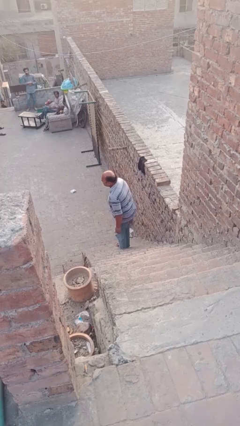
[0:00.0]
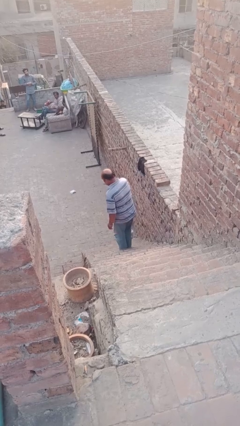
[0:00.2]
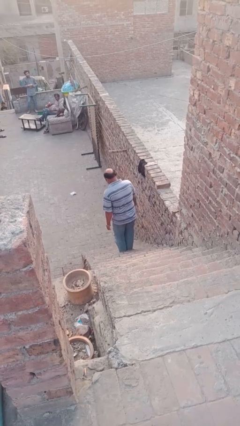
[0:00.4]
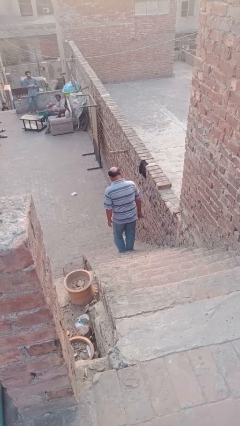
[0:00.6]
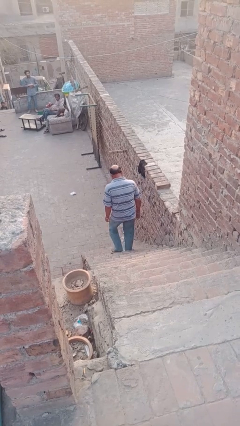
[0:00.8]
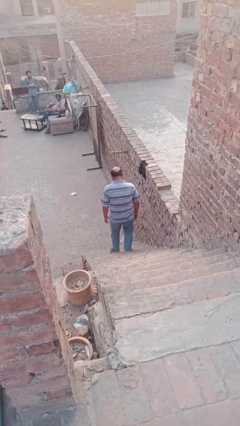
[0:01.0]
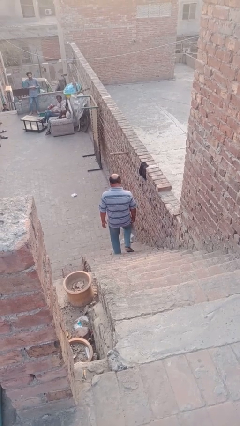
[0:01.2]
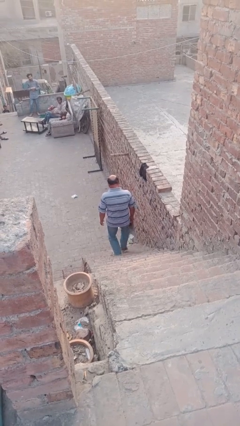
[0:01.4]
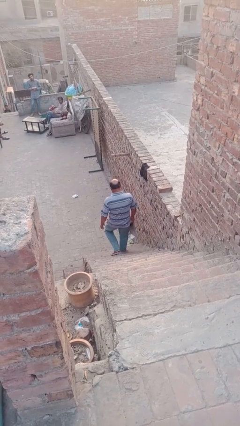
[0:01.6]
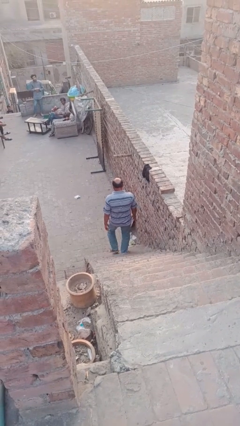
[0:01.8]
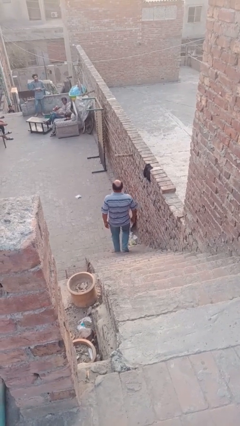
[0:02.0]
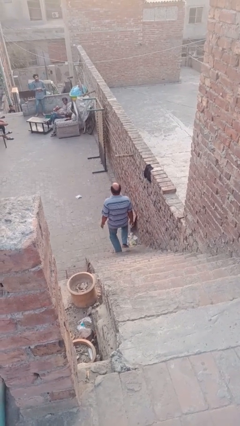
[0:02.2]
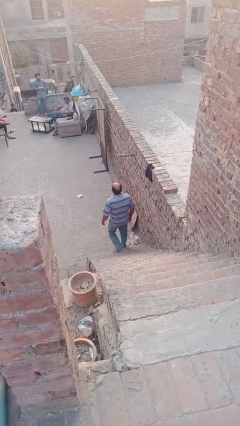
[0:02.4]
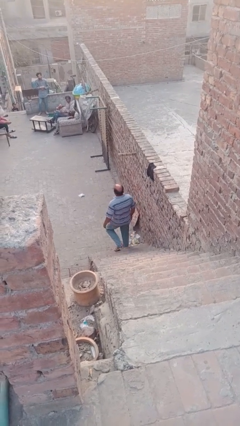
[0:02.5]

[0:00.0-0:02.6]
person climbs down stairs

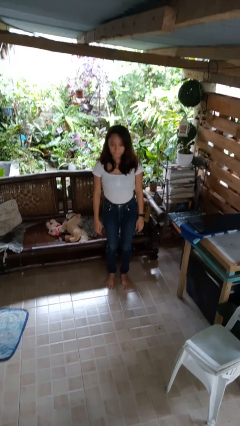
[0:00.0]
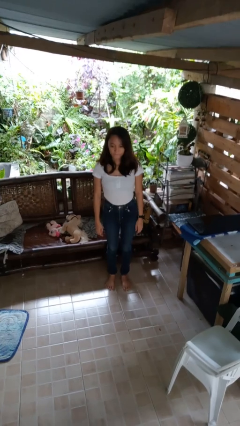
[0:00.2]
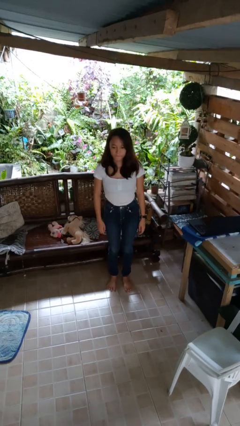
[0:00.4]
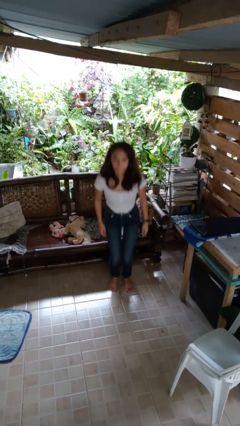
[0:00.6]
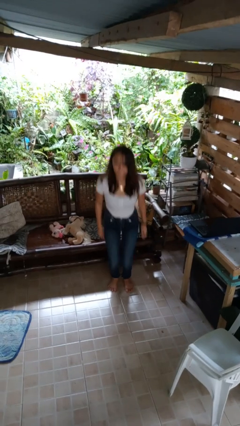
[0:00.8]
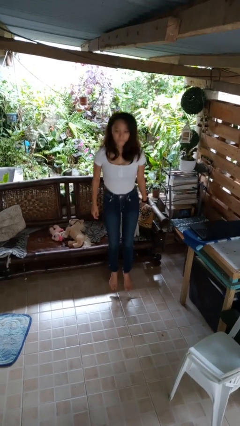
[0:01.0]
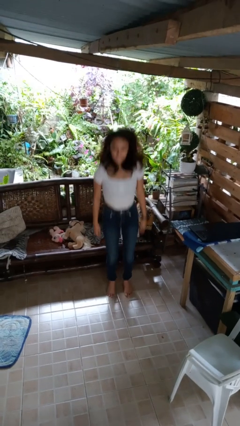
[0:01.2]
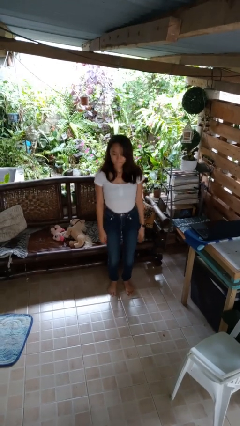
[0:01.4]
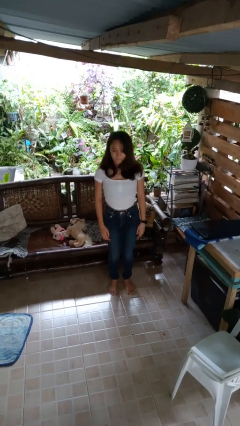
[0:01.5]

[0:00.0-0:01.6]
person jumps

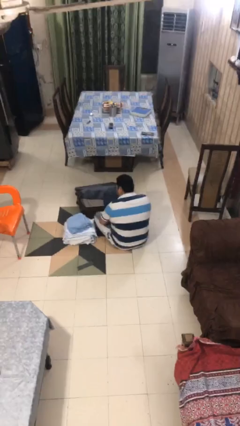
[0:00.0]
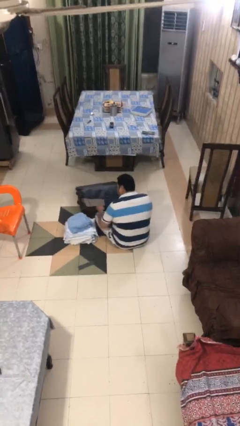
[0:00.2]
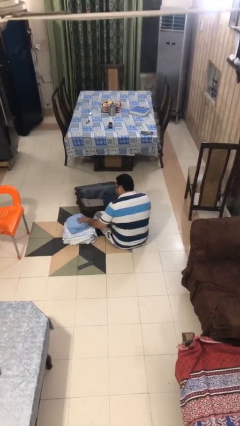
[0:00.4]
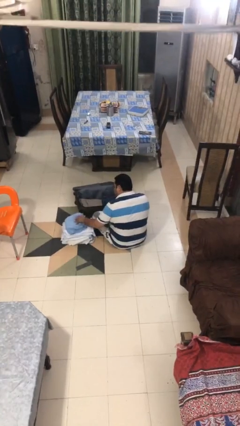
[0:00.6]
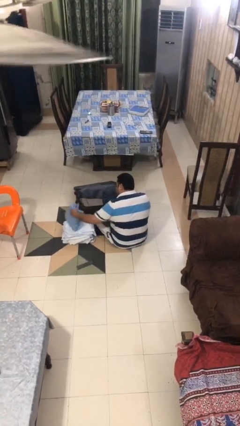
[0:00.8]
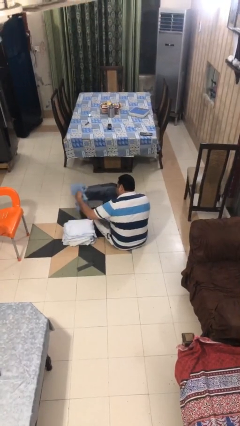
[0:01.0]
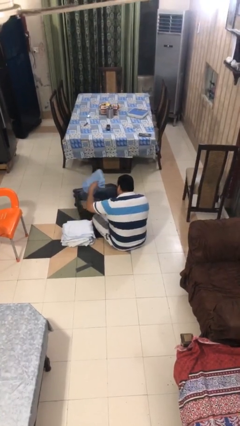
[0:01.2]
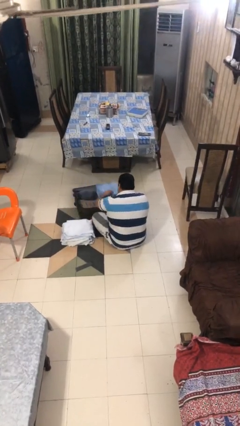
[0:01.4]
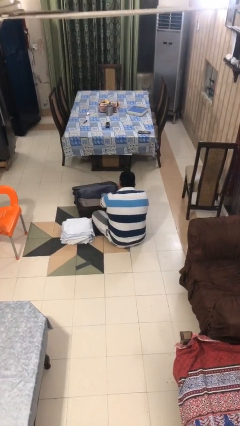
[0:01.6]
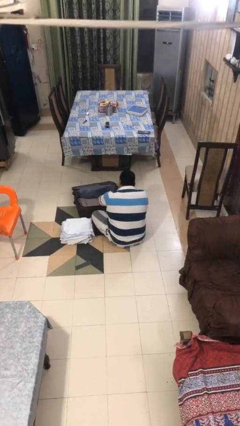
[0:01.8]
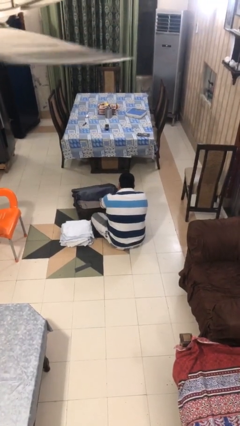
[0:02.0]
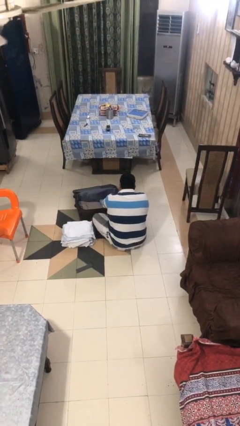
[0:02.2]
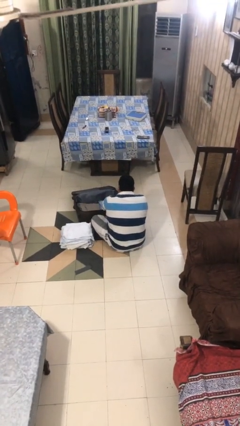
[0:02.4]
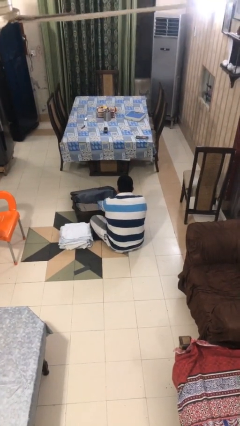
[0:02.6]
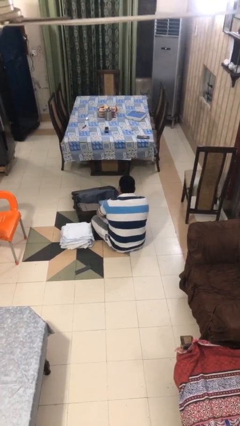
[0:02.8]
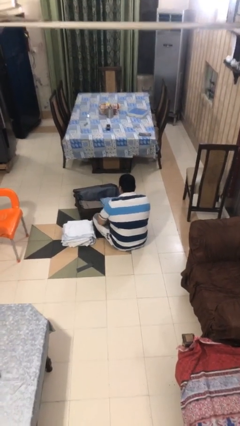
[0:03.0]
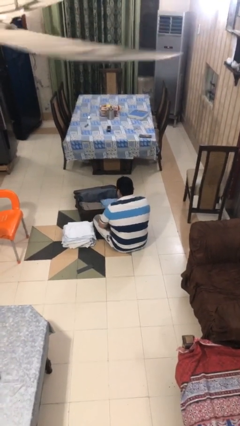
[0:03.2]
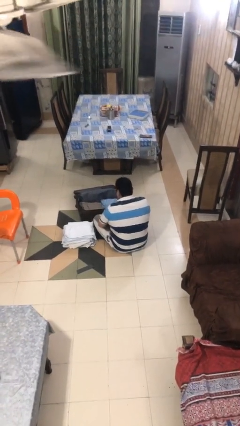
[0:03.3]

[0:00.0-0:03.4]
person loads clothes into suitcase

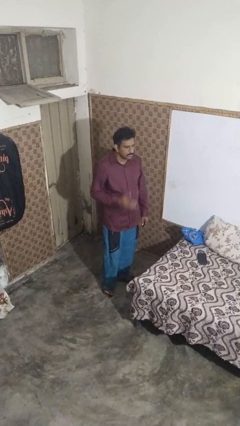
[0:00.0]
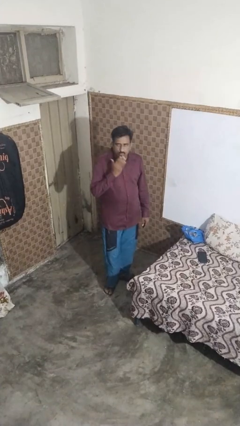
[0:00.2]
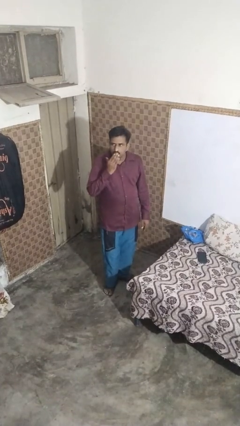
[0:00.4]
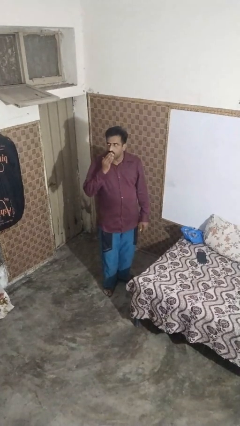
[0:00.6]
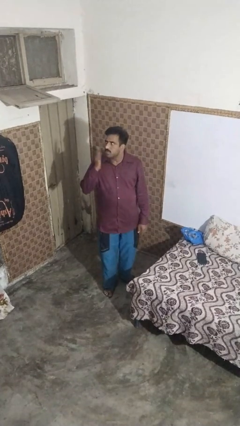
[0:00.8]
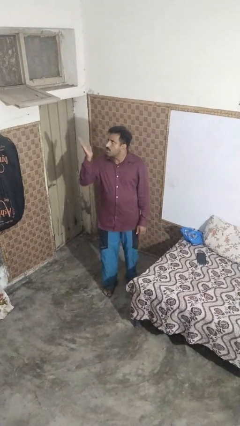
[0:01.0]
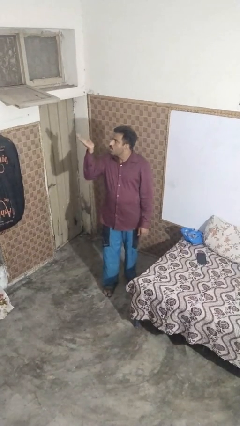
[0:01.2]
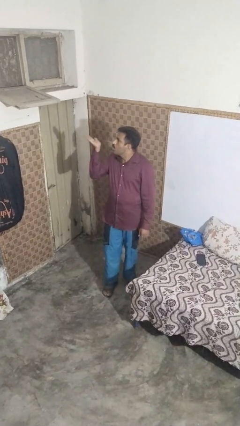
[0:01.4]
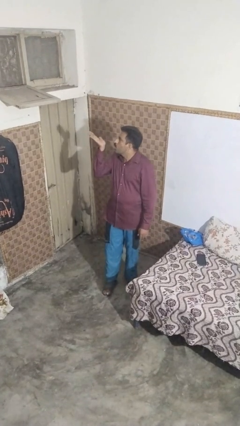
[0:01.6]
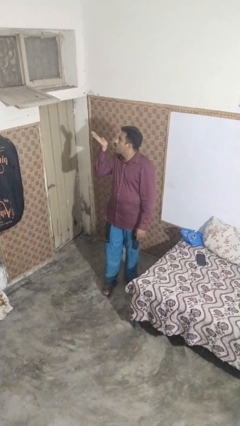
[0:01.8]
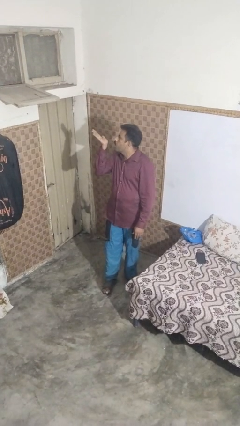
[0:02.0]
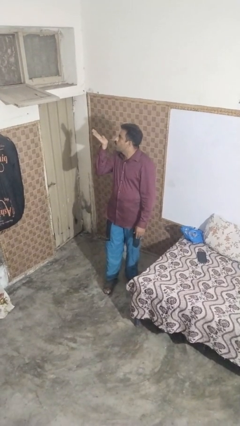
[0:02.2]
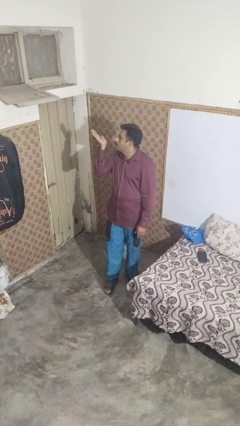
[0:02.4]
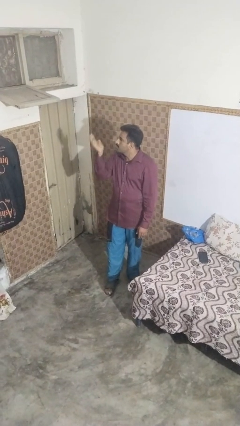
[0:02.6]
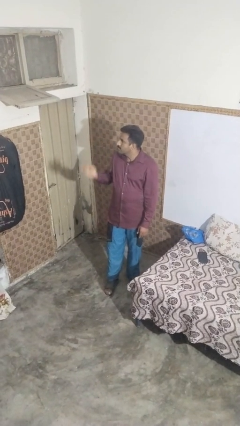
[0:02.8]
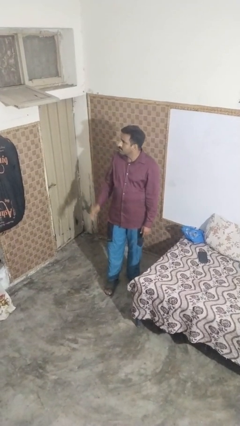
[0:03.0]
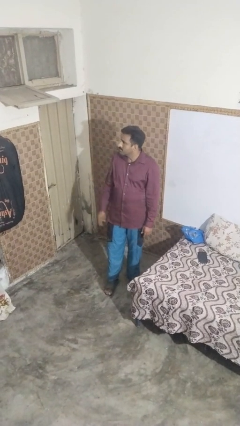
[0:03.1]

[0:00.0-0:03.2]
person gestures blow kiss

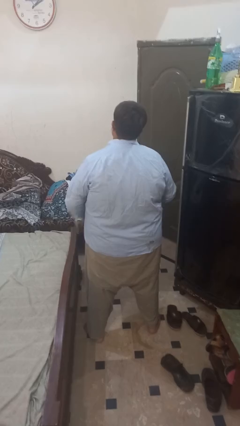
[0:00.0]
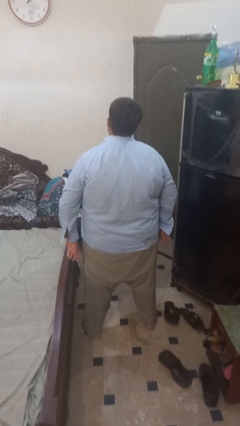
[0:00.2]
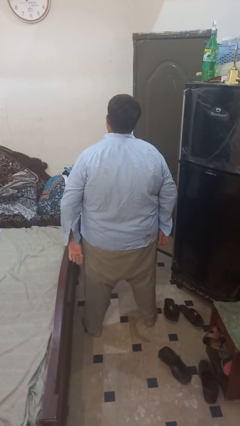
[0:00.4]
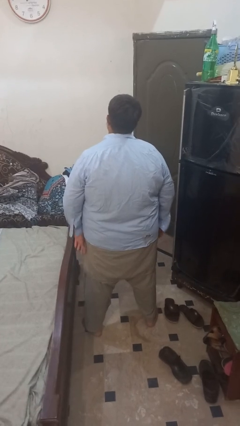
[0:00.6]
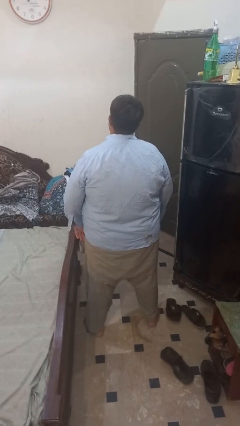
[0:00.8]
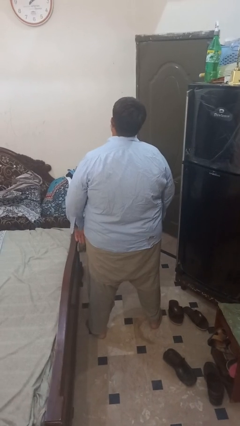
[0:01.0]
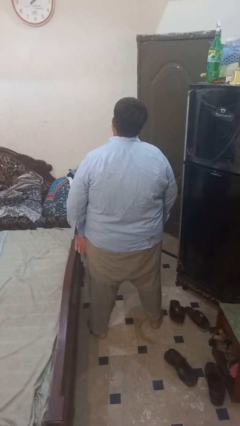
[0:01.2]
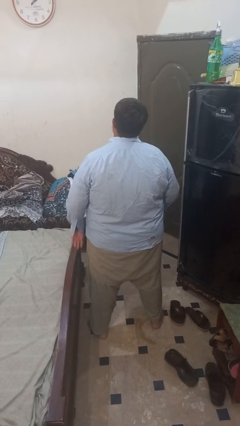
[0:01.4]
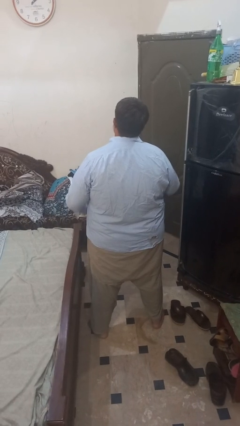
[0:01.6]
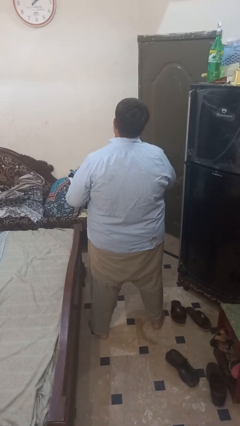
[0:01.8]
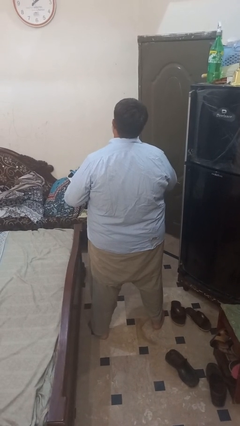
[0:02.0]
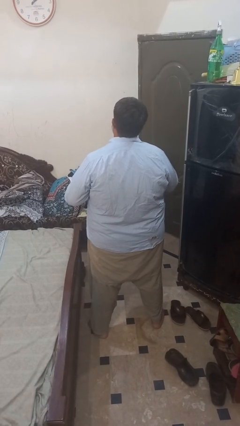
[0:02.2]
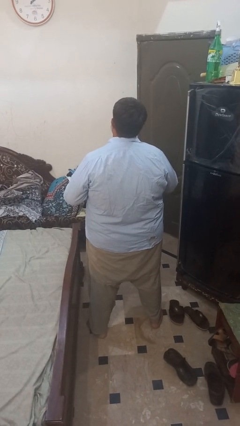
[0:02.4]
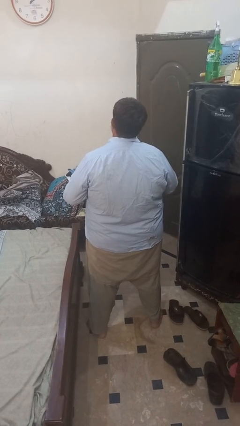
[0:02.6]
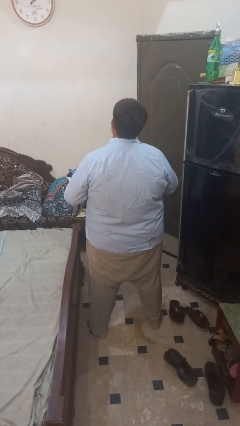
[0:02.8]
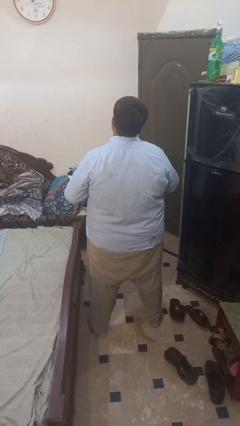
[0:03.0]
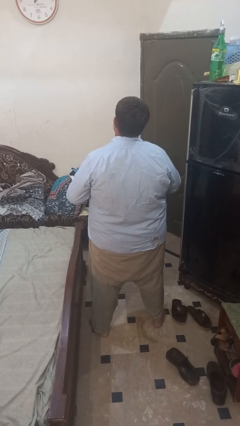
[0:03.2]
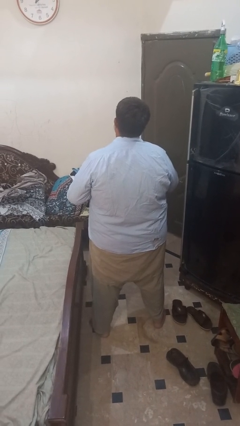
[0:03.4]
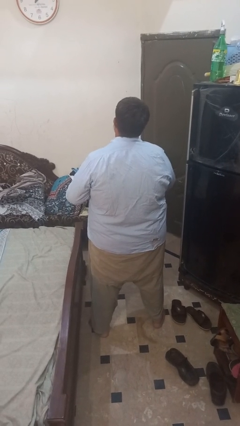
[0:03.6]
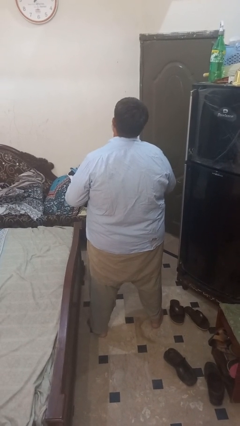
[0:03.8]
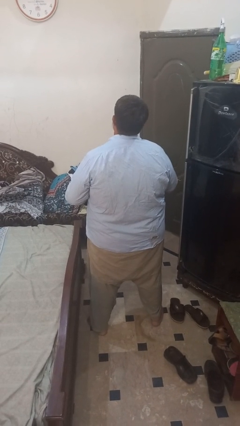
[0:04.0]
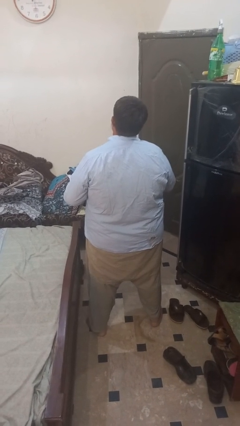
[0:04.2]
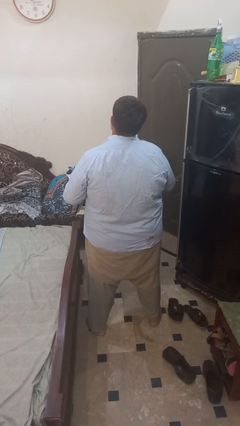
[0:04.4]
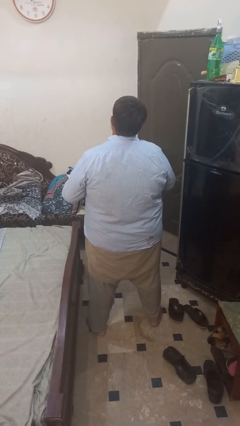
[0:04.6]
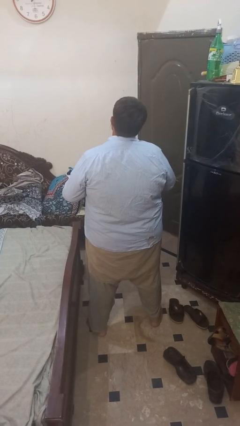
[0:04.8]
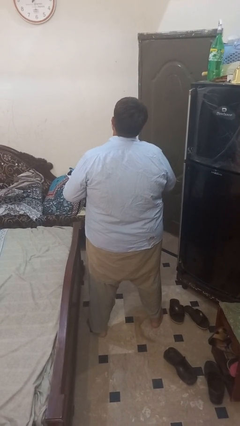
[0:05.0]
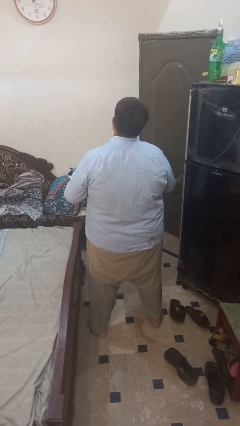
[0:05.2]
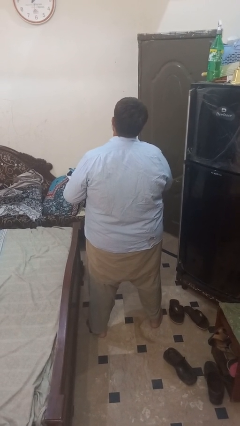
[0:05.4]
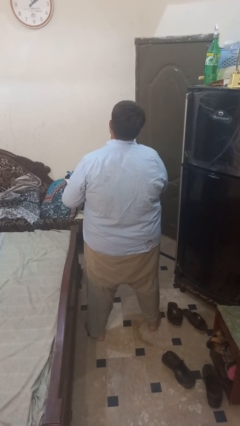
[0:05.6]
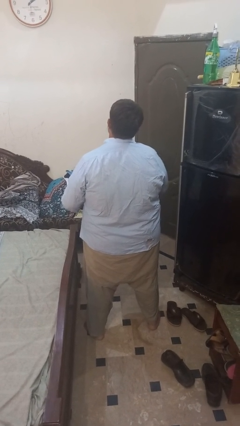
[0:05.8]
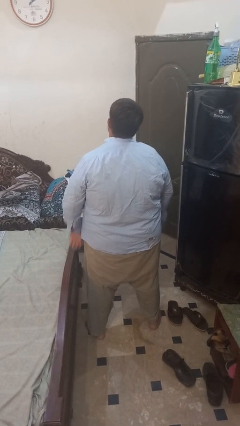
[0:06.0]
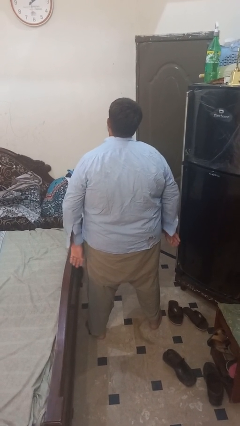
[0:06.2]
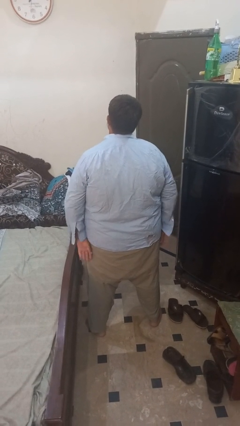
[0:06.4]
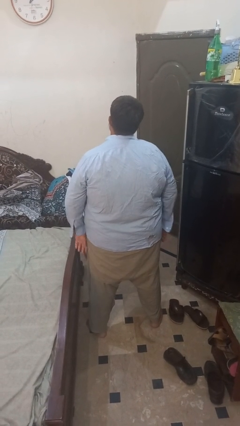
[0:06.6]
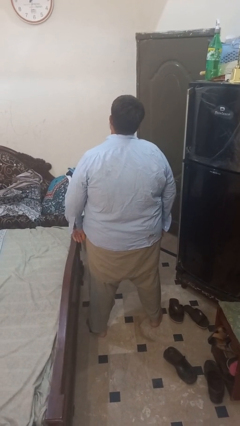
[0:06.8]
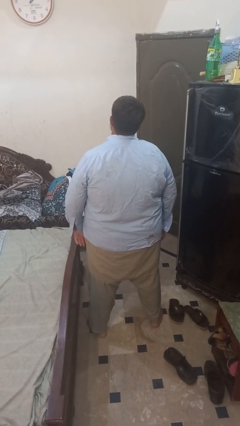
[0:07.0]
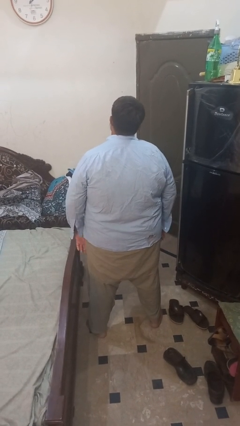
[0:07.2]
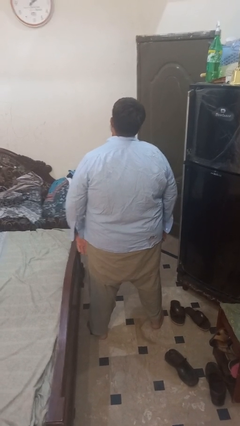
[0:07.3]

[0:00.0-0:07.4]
person unbuttons shirt
